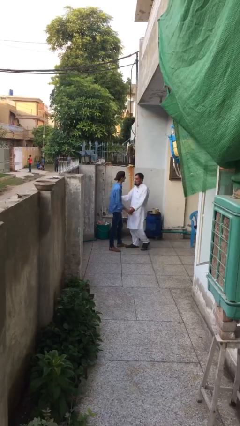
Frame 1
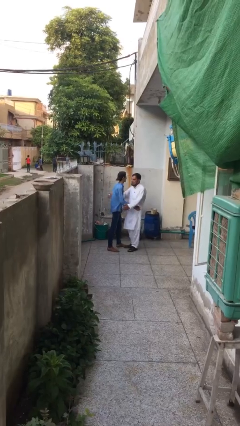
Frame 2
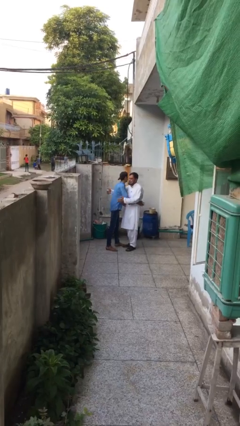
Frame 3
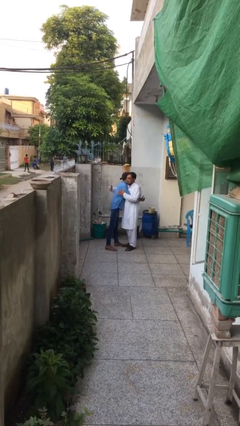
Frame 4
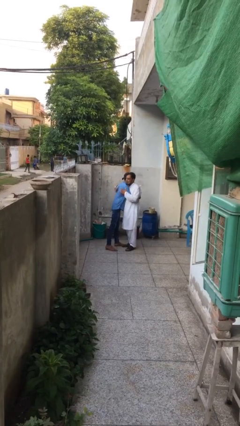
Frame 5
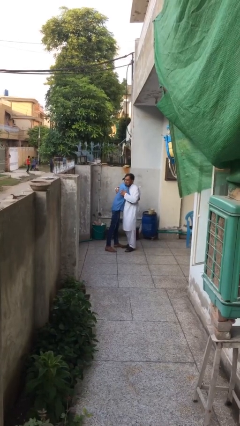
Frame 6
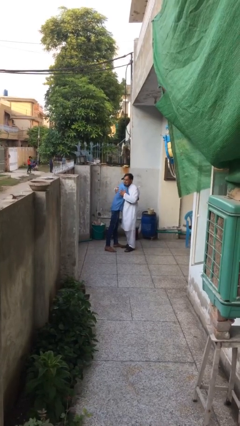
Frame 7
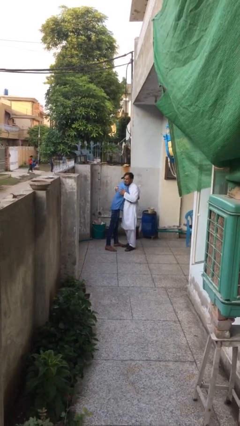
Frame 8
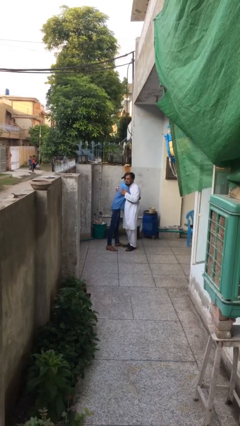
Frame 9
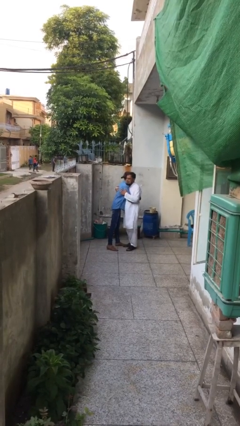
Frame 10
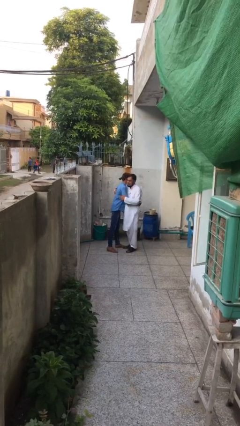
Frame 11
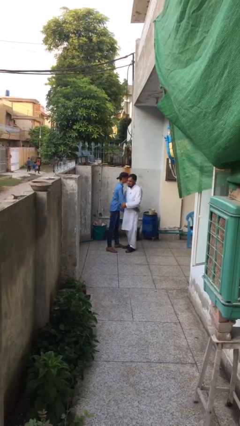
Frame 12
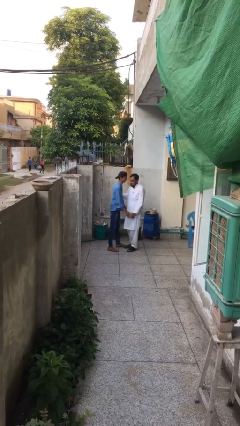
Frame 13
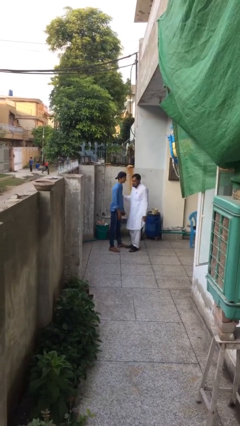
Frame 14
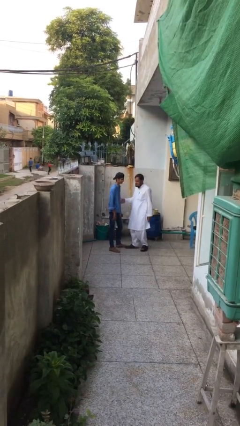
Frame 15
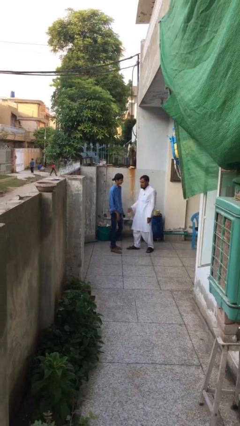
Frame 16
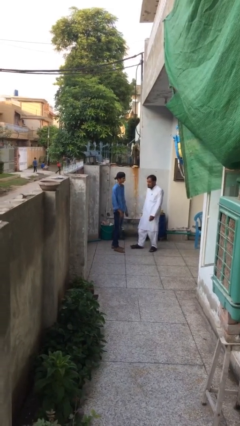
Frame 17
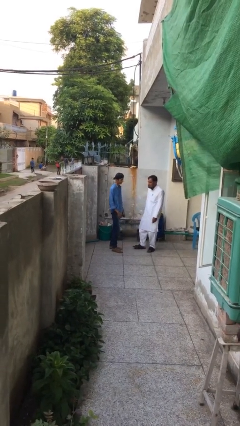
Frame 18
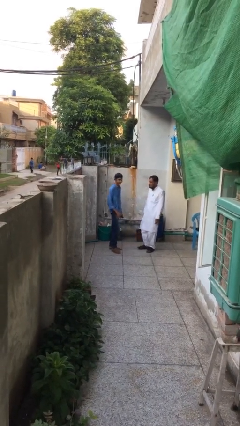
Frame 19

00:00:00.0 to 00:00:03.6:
person embraces person

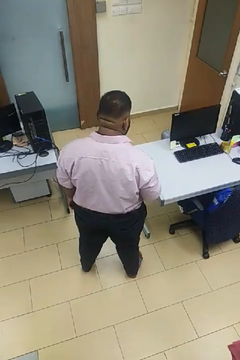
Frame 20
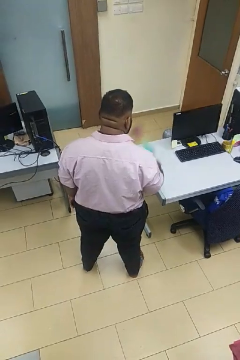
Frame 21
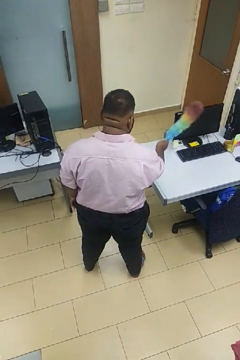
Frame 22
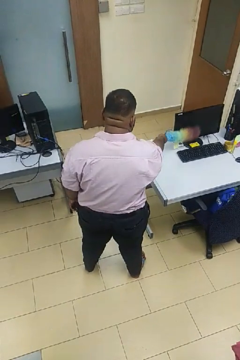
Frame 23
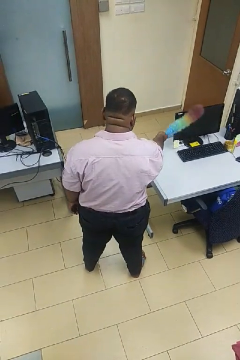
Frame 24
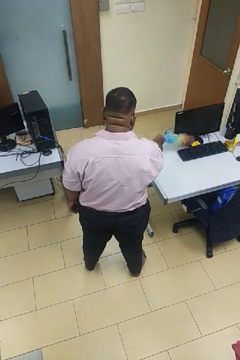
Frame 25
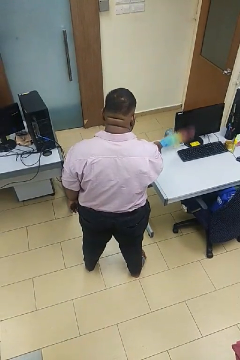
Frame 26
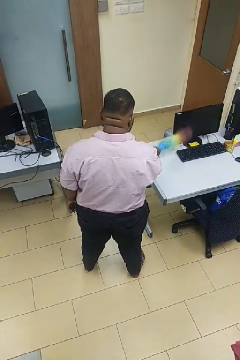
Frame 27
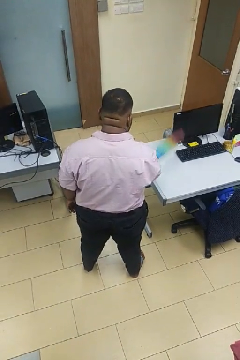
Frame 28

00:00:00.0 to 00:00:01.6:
person dusts furniture

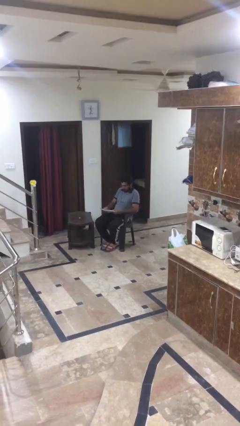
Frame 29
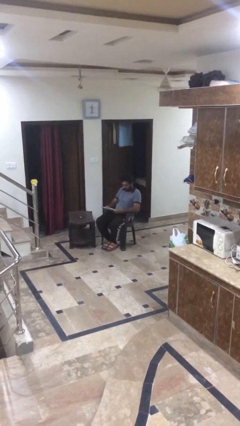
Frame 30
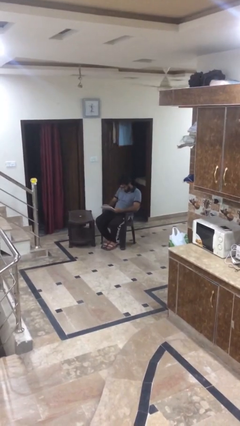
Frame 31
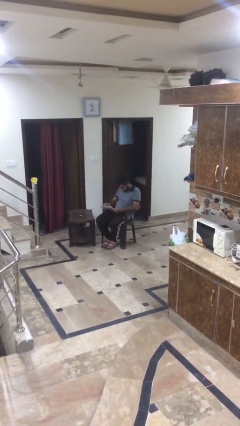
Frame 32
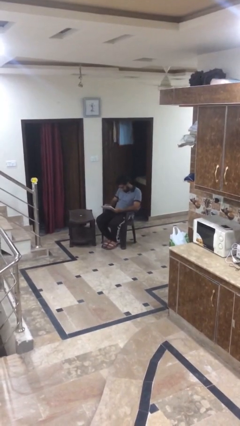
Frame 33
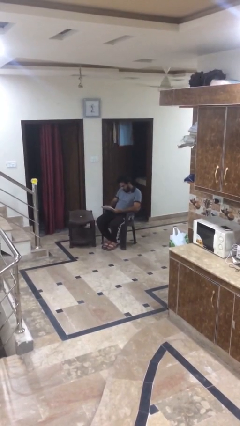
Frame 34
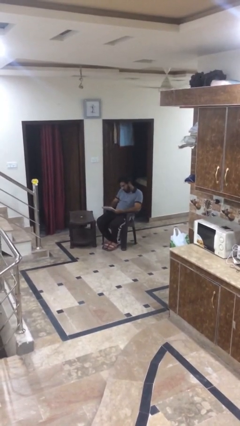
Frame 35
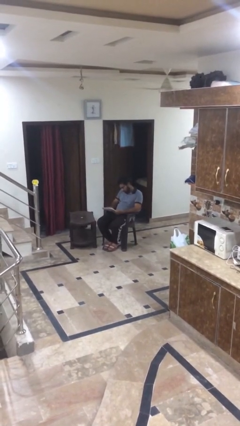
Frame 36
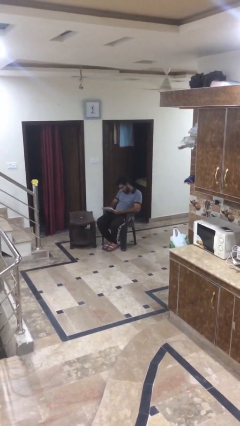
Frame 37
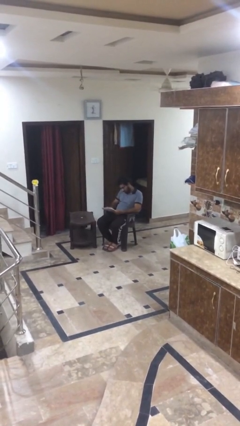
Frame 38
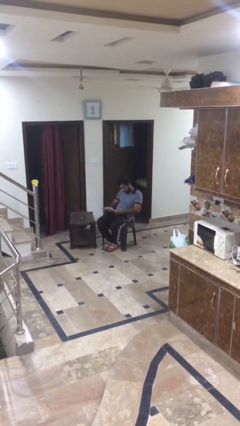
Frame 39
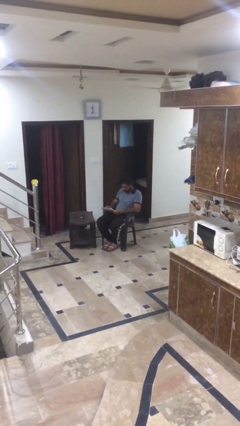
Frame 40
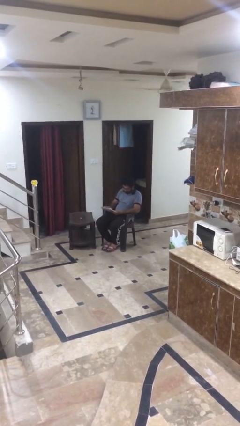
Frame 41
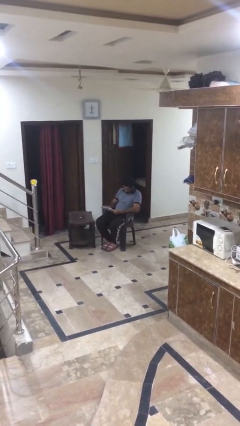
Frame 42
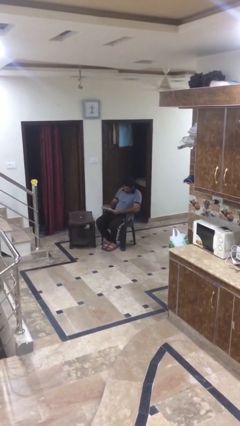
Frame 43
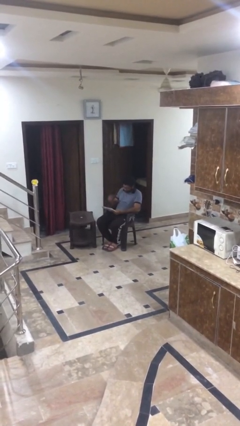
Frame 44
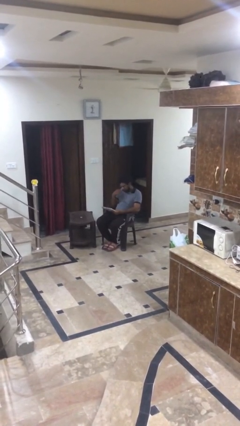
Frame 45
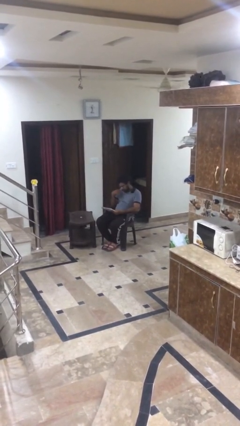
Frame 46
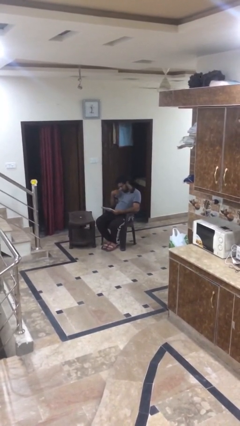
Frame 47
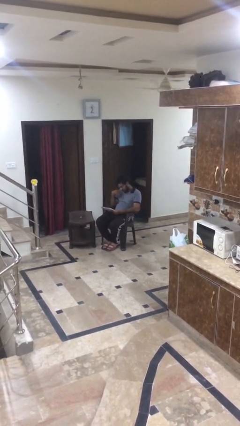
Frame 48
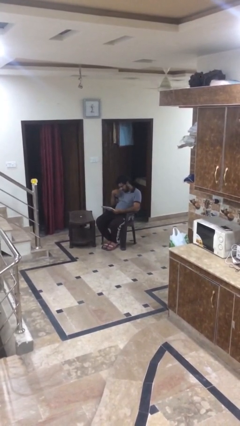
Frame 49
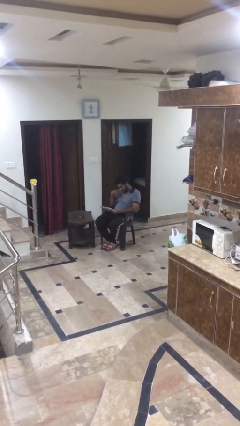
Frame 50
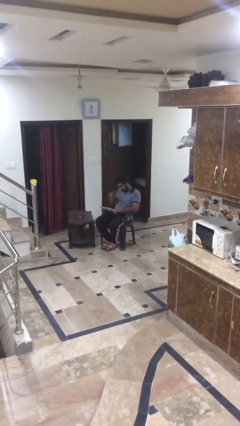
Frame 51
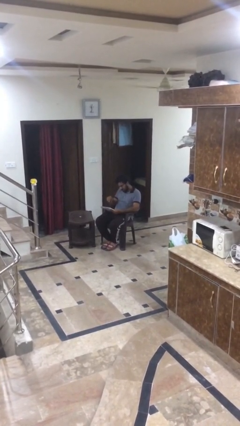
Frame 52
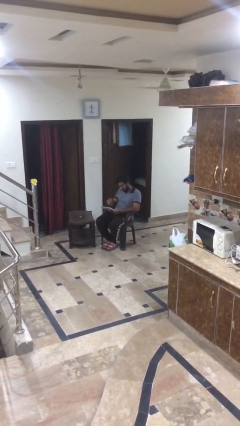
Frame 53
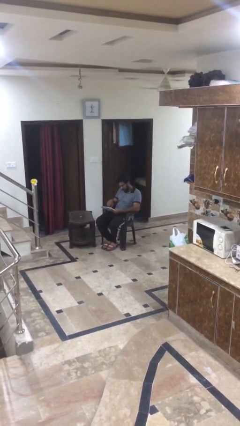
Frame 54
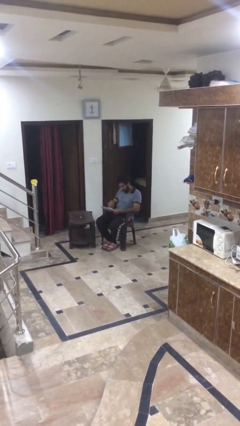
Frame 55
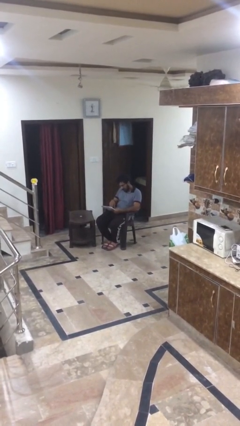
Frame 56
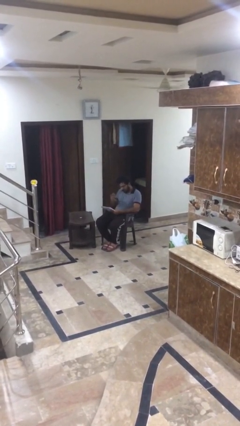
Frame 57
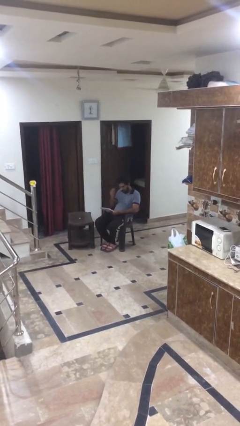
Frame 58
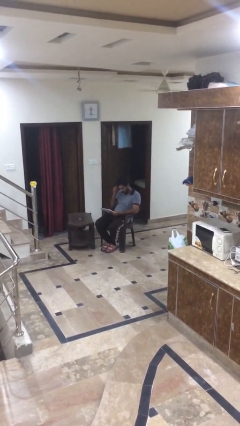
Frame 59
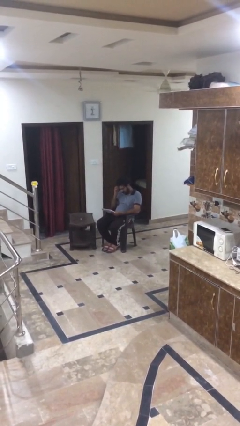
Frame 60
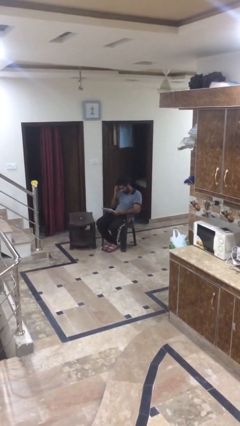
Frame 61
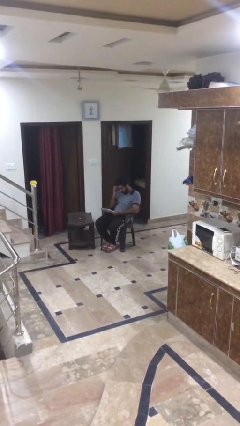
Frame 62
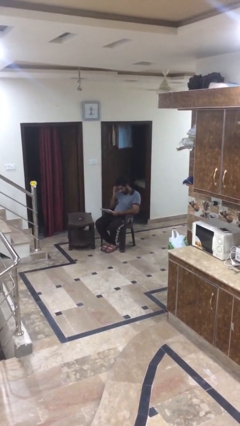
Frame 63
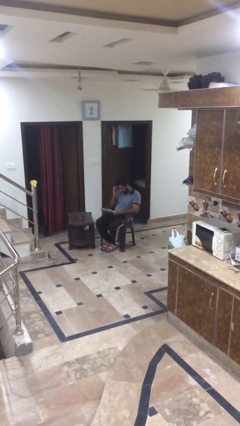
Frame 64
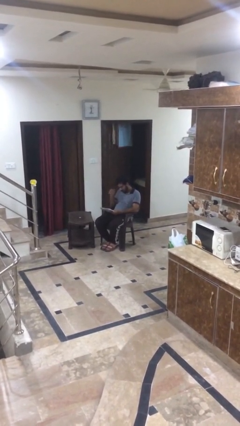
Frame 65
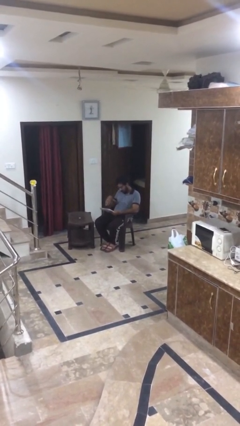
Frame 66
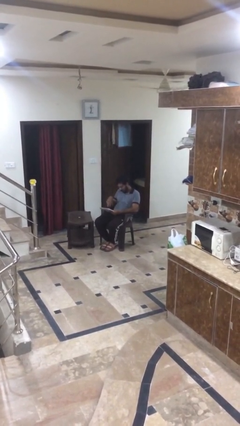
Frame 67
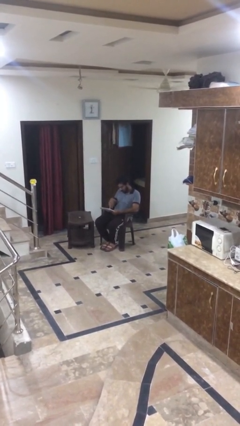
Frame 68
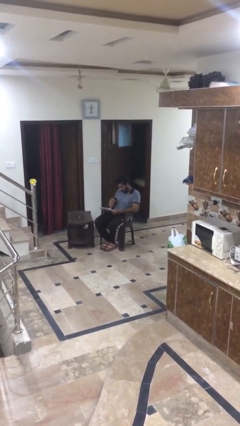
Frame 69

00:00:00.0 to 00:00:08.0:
person reads document

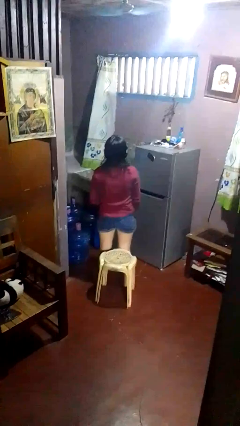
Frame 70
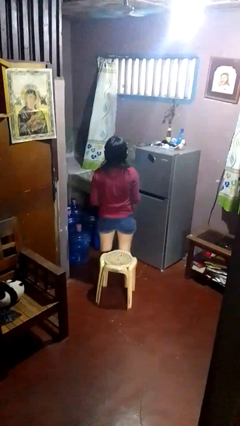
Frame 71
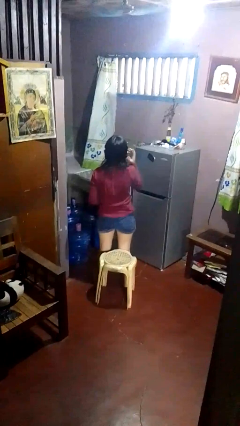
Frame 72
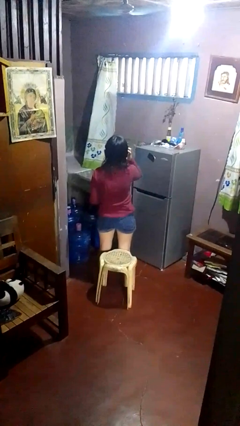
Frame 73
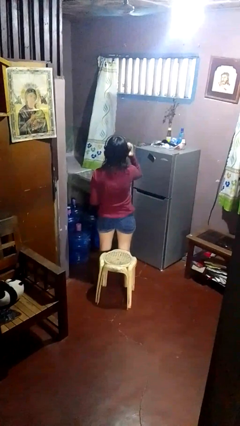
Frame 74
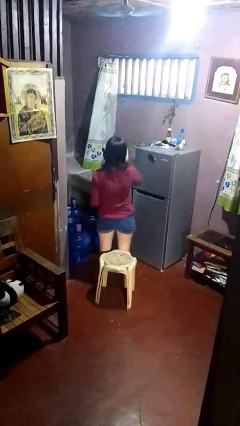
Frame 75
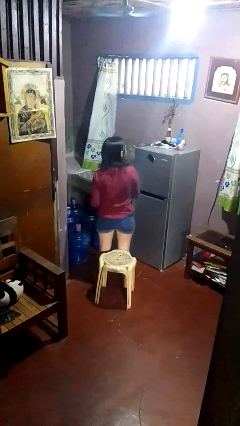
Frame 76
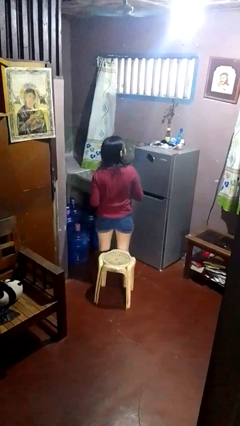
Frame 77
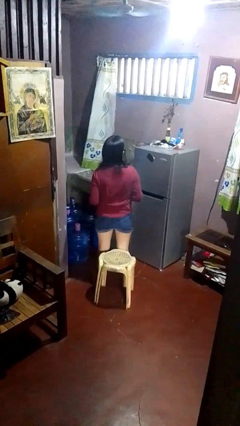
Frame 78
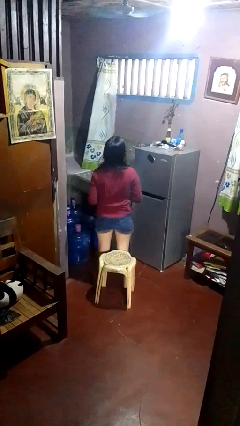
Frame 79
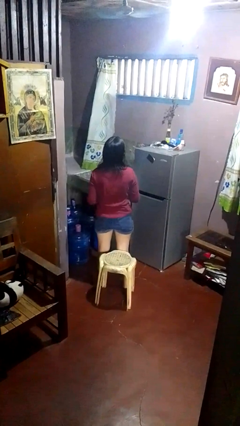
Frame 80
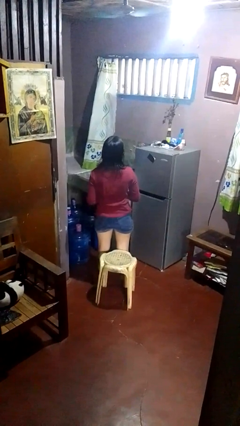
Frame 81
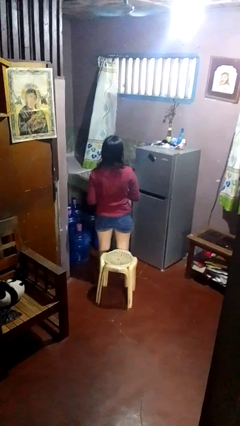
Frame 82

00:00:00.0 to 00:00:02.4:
person takes off headphones

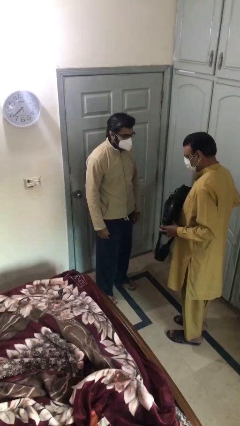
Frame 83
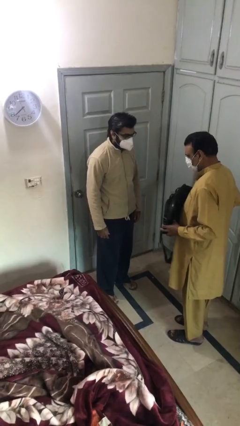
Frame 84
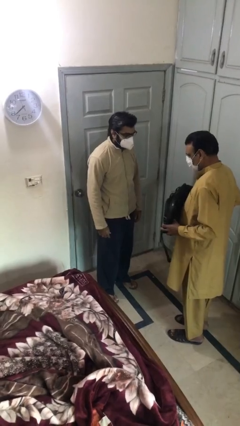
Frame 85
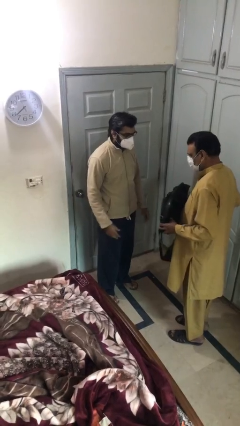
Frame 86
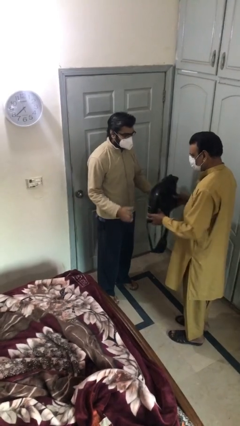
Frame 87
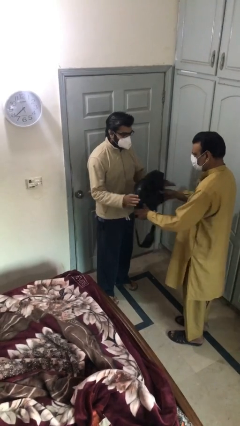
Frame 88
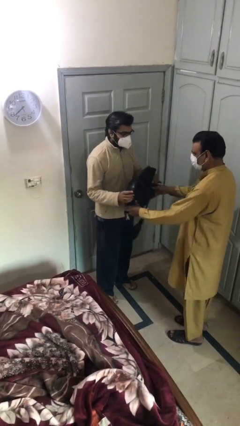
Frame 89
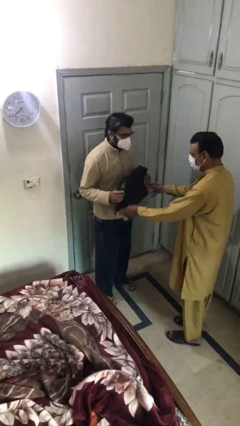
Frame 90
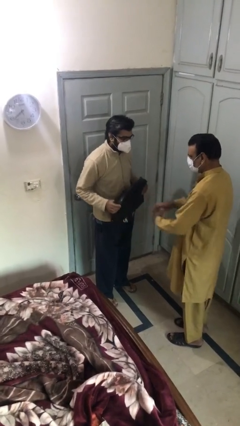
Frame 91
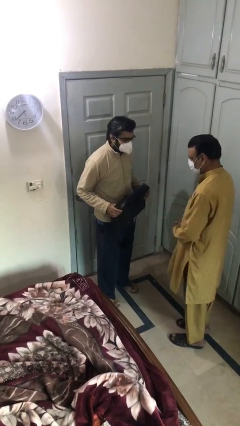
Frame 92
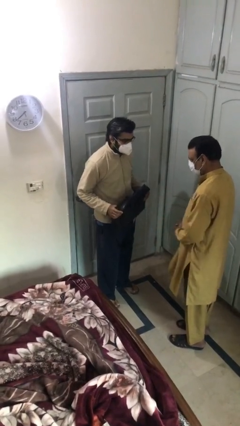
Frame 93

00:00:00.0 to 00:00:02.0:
person transfers object to person

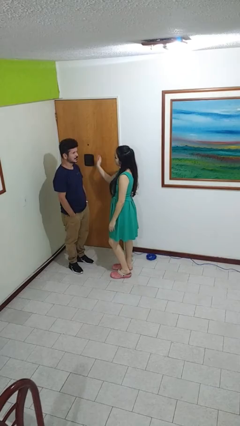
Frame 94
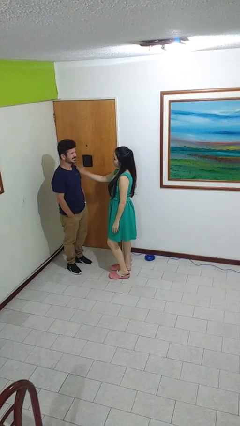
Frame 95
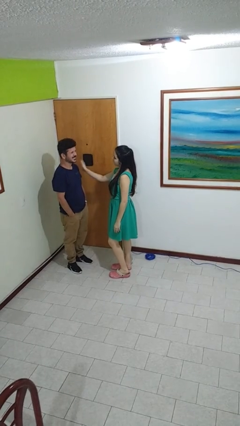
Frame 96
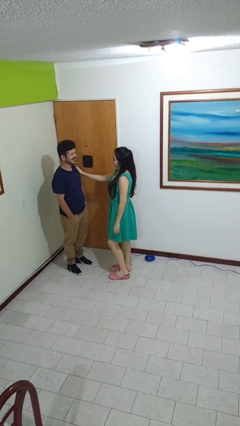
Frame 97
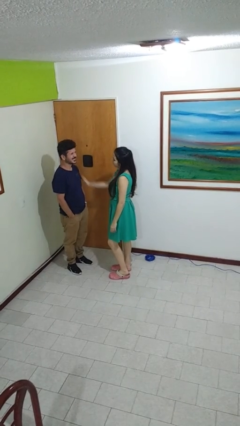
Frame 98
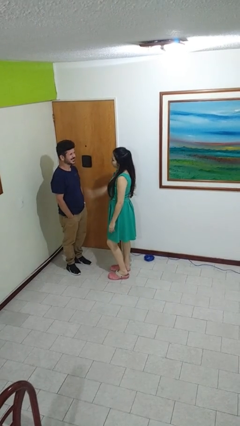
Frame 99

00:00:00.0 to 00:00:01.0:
person pounds shoulders of person
